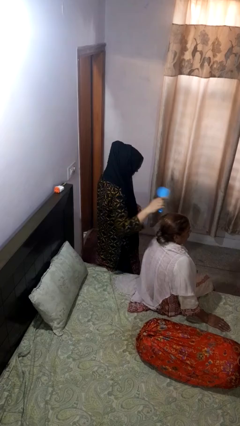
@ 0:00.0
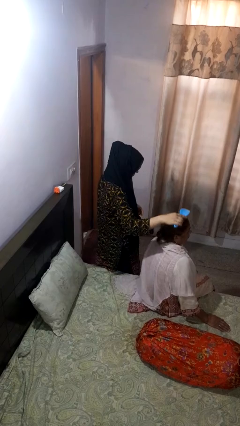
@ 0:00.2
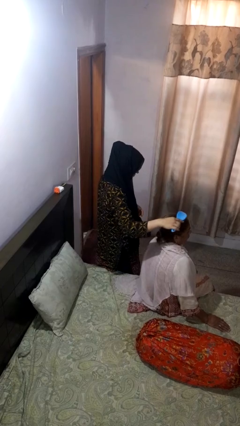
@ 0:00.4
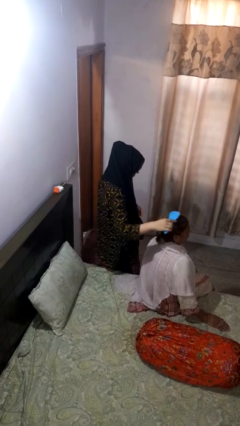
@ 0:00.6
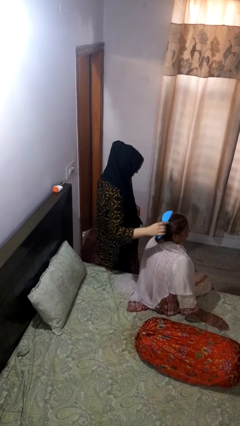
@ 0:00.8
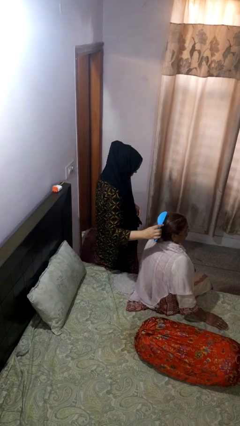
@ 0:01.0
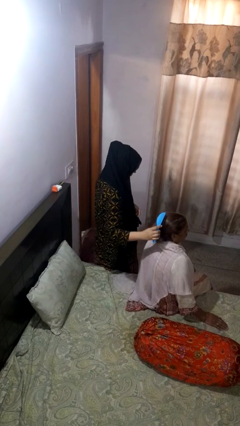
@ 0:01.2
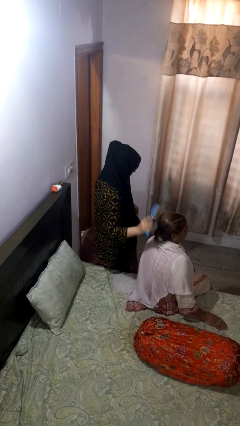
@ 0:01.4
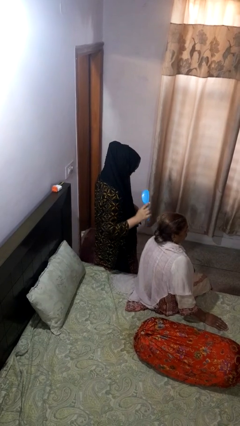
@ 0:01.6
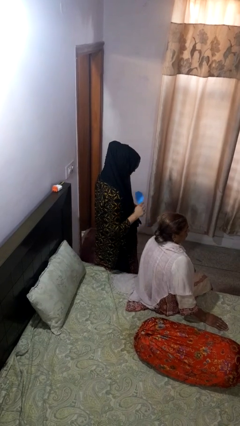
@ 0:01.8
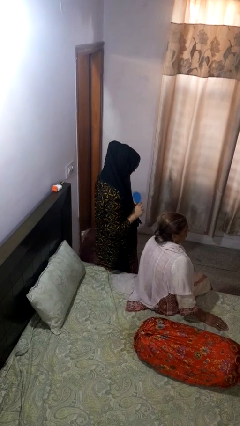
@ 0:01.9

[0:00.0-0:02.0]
person brushes hair of person

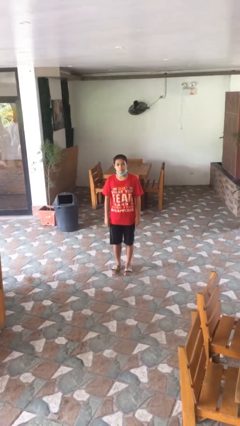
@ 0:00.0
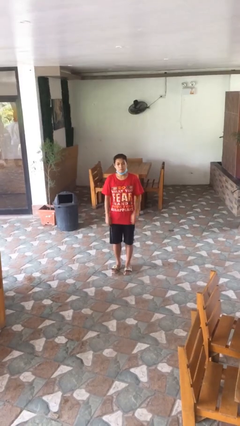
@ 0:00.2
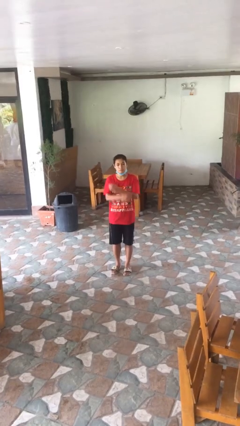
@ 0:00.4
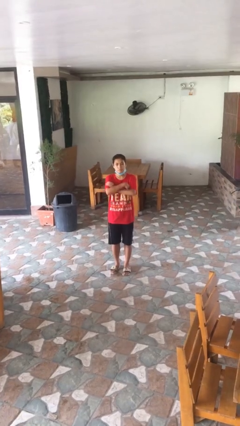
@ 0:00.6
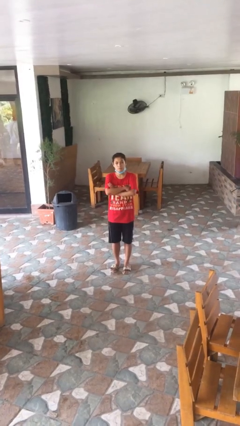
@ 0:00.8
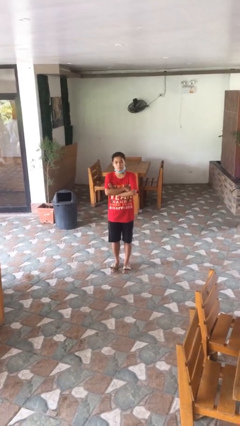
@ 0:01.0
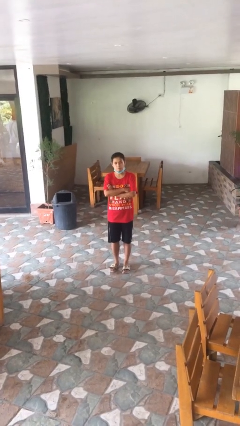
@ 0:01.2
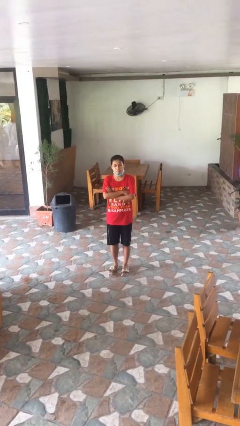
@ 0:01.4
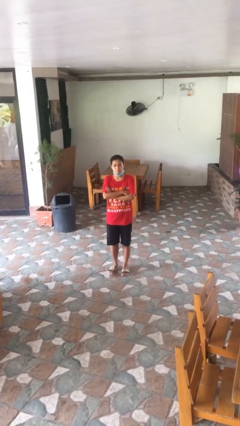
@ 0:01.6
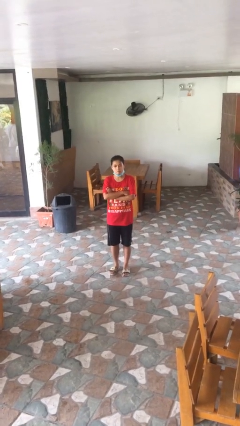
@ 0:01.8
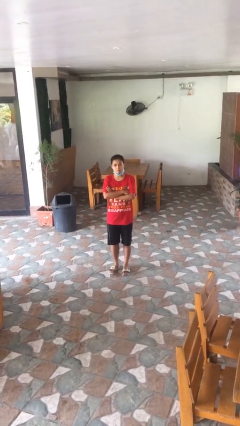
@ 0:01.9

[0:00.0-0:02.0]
person crosses arms

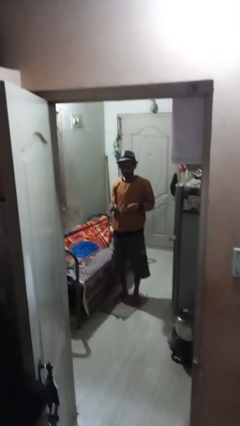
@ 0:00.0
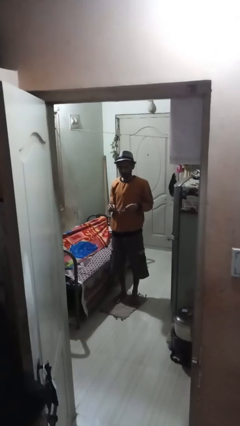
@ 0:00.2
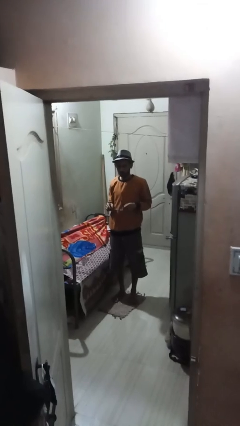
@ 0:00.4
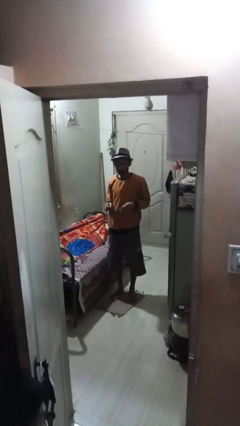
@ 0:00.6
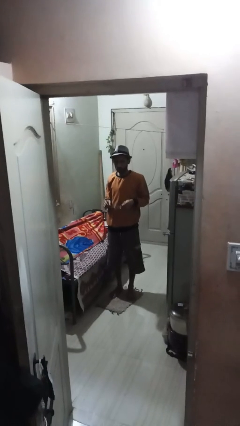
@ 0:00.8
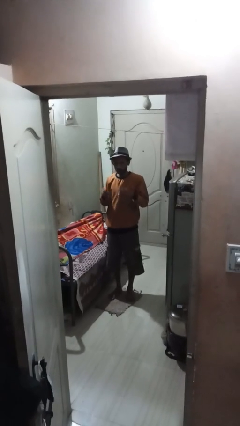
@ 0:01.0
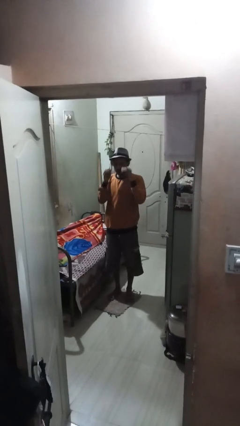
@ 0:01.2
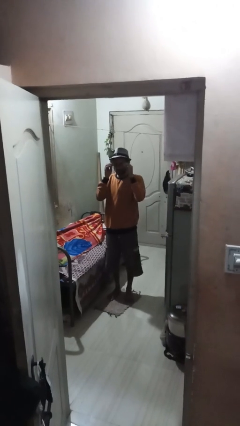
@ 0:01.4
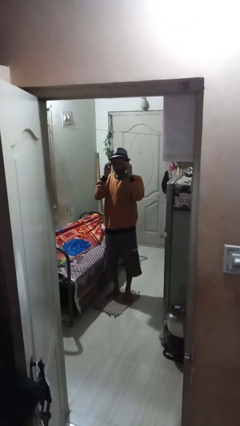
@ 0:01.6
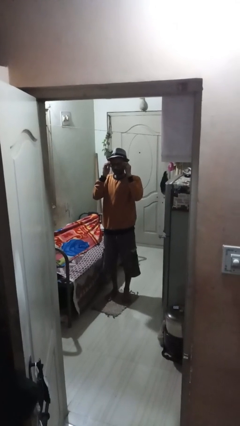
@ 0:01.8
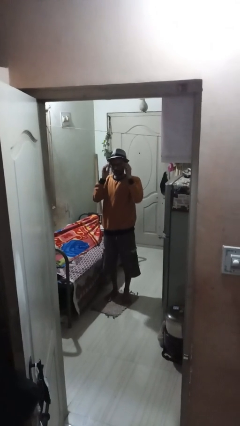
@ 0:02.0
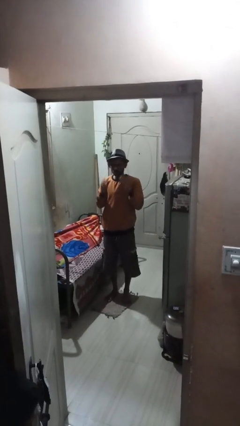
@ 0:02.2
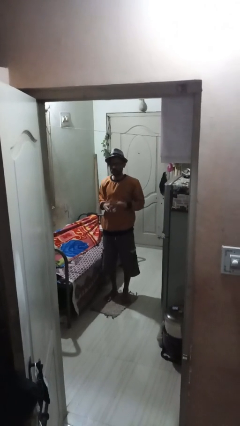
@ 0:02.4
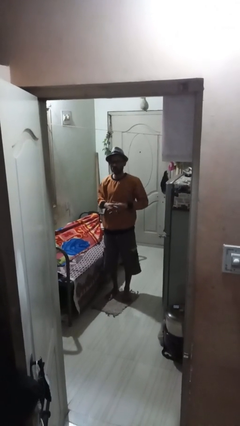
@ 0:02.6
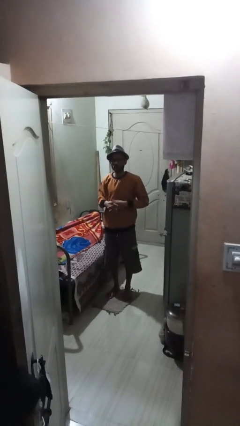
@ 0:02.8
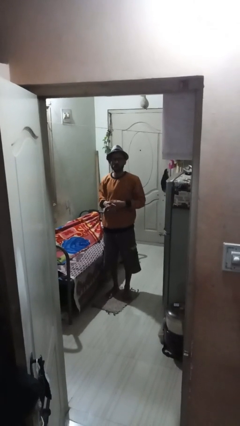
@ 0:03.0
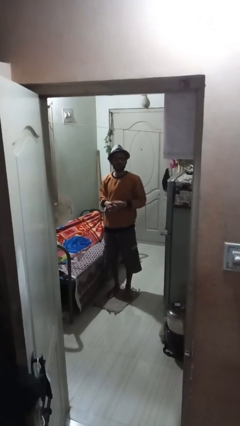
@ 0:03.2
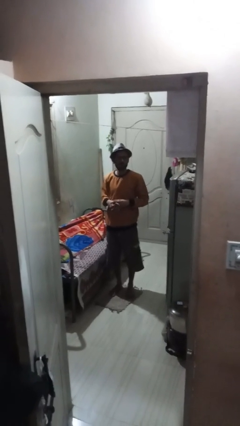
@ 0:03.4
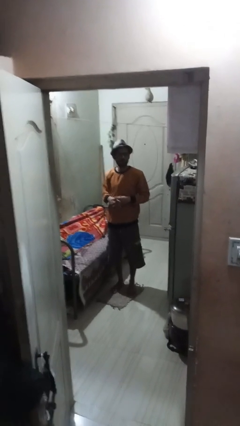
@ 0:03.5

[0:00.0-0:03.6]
person puts on glasses

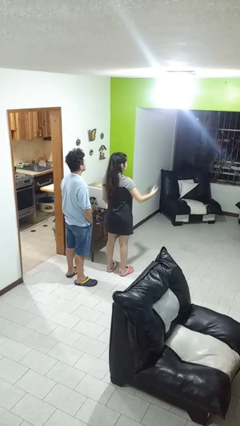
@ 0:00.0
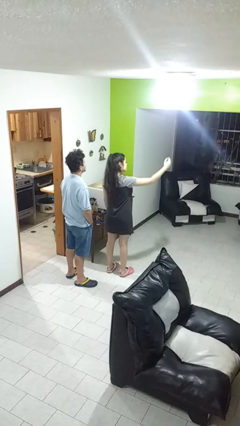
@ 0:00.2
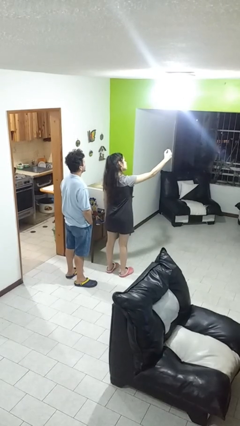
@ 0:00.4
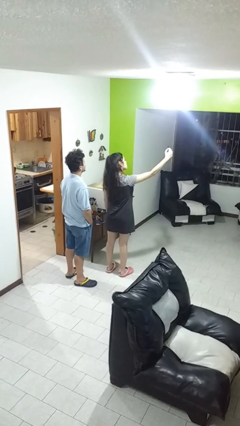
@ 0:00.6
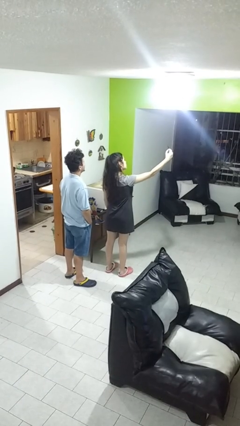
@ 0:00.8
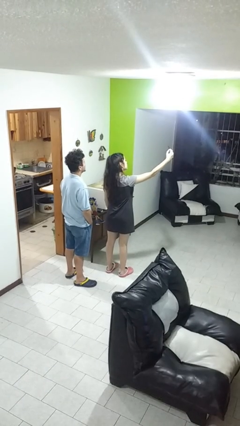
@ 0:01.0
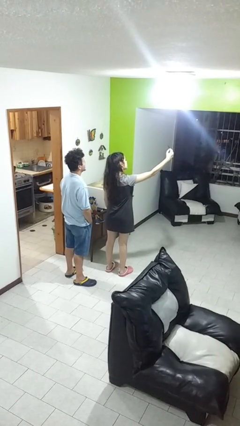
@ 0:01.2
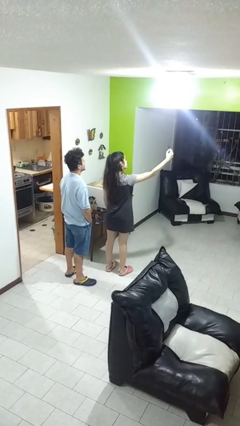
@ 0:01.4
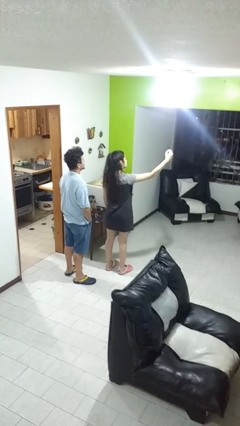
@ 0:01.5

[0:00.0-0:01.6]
person takes selfie with person

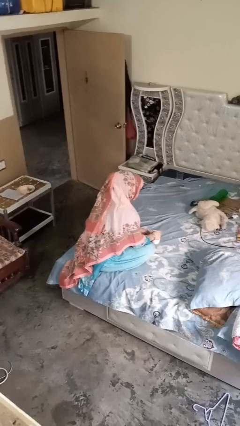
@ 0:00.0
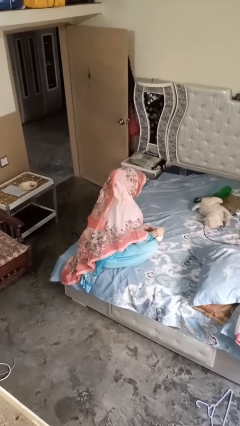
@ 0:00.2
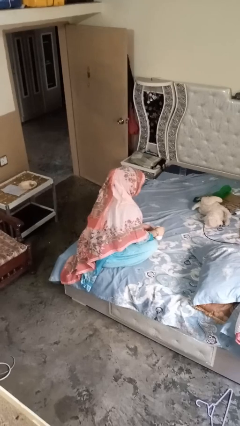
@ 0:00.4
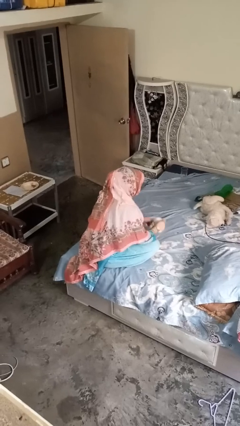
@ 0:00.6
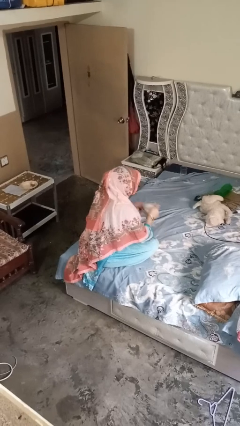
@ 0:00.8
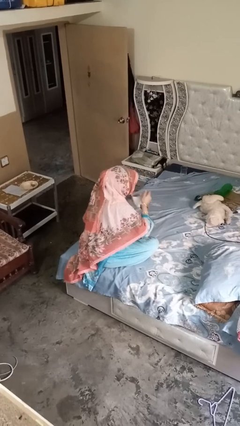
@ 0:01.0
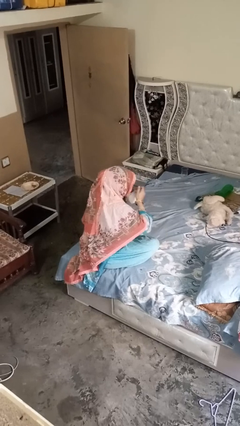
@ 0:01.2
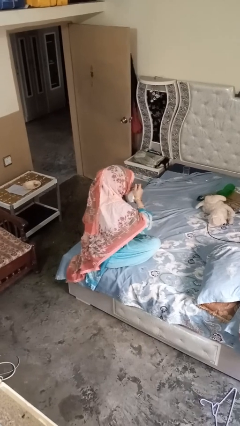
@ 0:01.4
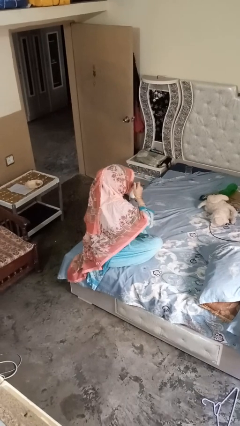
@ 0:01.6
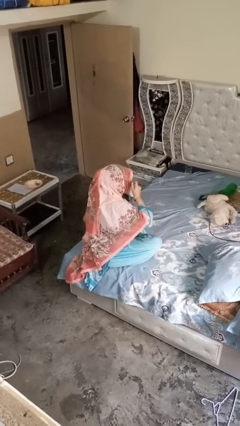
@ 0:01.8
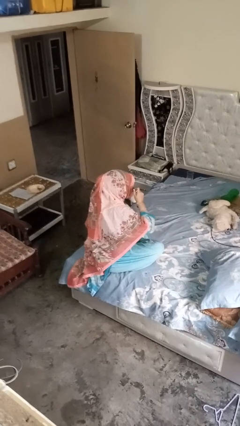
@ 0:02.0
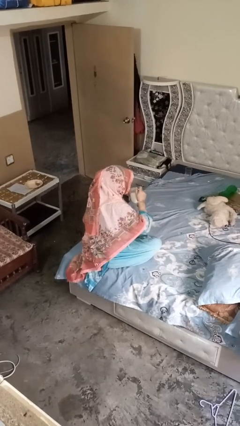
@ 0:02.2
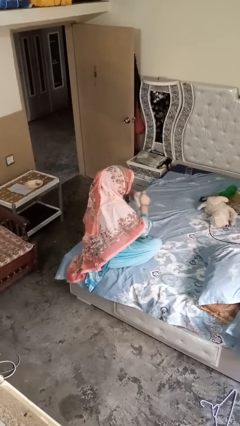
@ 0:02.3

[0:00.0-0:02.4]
person drinks from mug

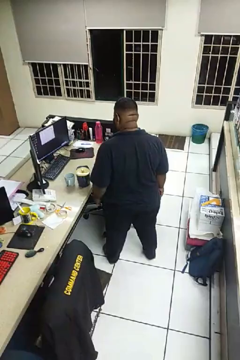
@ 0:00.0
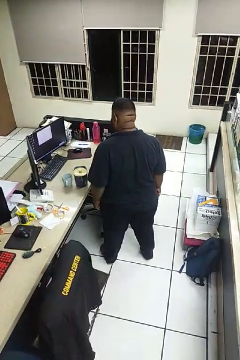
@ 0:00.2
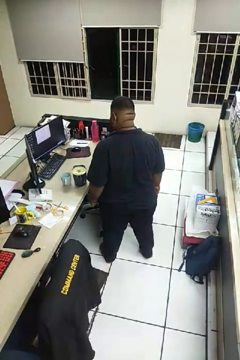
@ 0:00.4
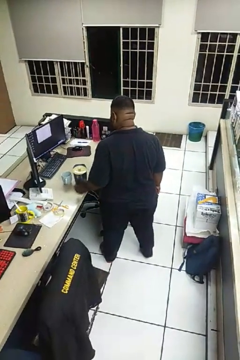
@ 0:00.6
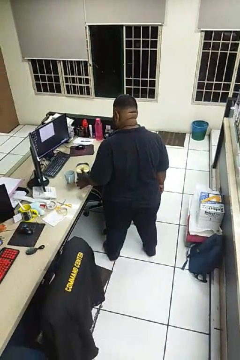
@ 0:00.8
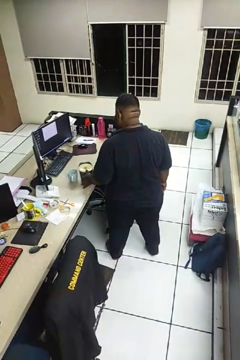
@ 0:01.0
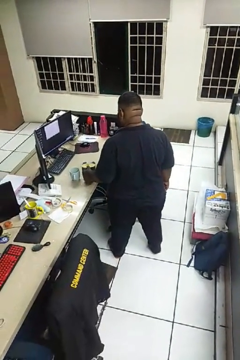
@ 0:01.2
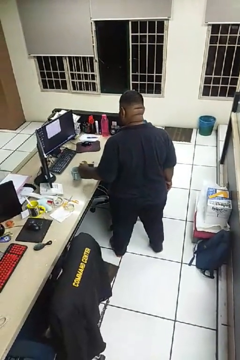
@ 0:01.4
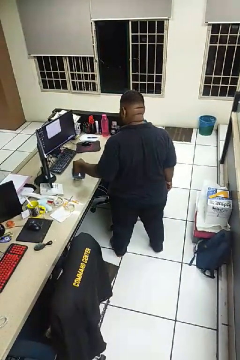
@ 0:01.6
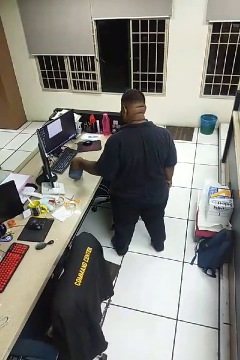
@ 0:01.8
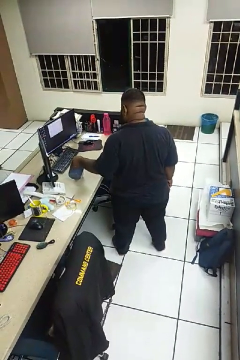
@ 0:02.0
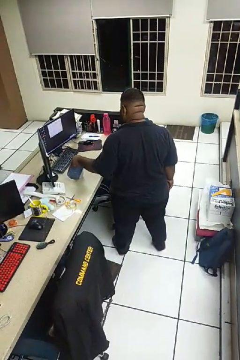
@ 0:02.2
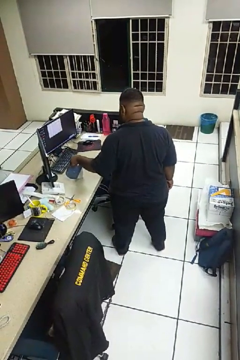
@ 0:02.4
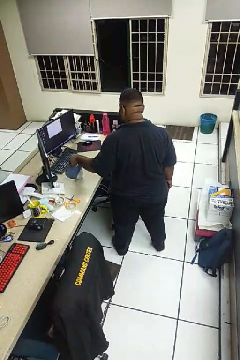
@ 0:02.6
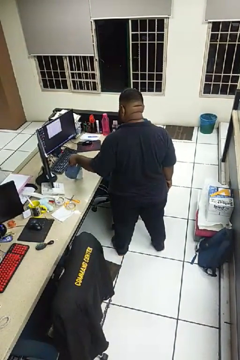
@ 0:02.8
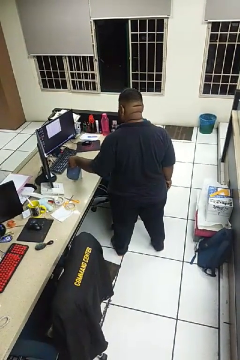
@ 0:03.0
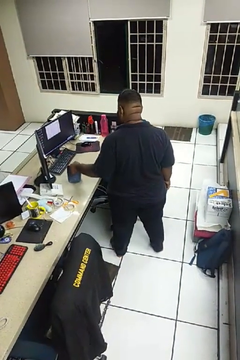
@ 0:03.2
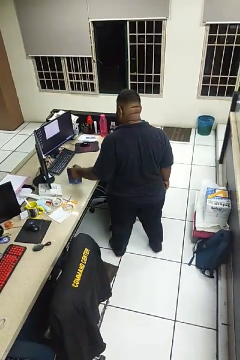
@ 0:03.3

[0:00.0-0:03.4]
person pours coffee into mug

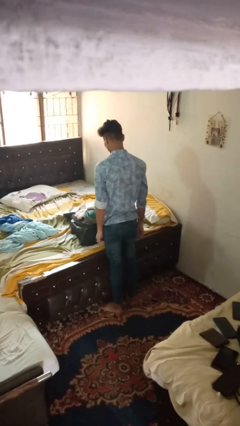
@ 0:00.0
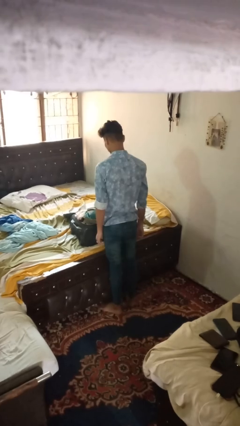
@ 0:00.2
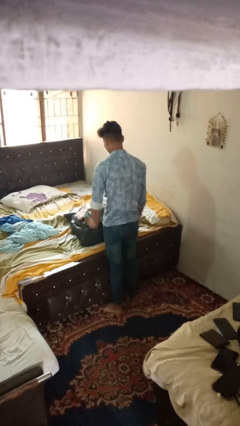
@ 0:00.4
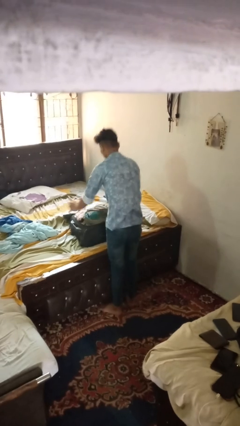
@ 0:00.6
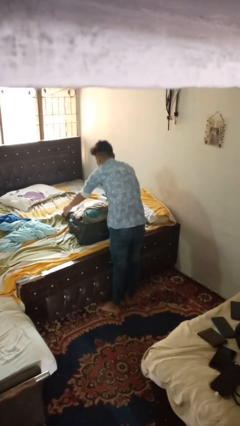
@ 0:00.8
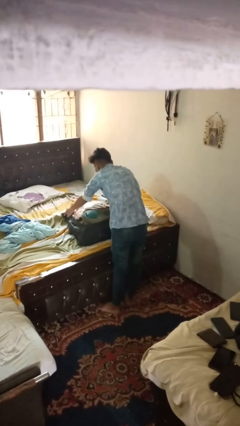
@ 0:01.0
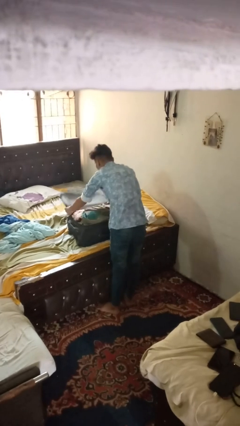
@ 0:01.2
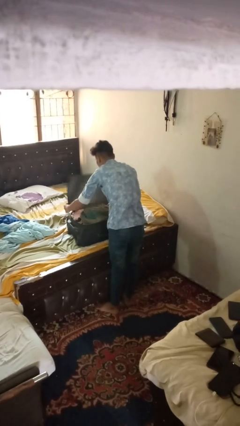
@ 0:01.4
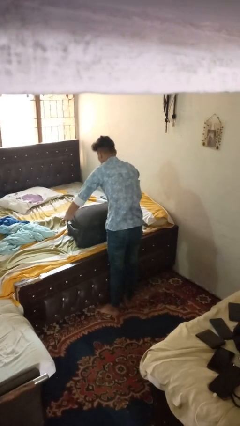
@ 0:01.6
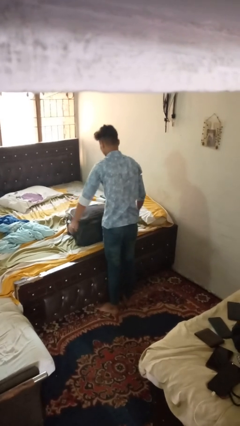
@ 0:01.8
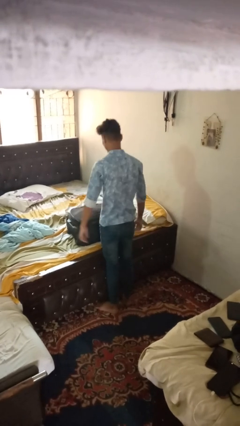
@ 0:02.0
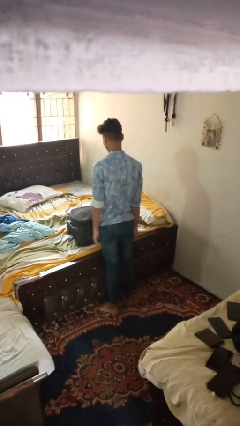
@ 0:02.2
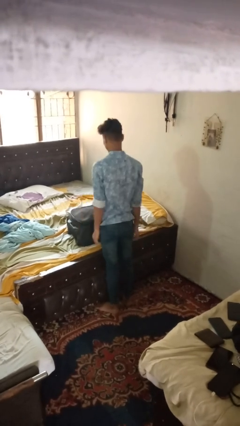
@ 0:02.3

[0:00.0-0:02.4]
person closes suitcase

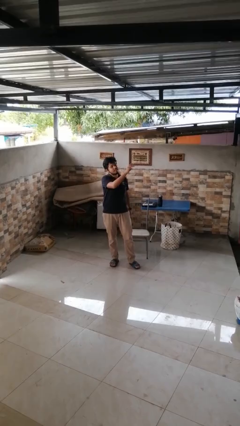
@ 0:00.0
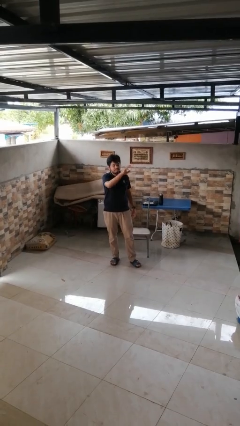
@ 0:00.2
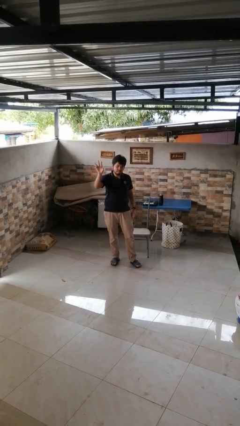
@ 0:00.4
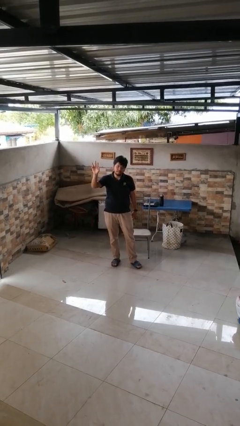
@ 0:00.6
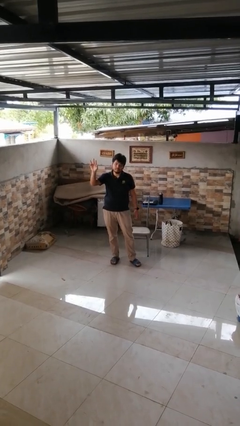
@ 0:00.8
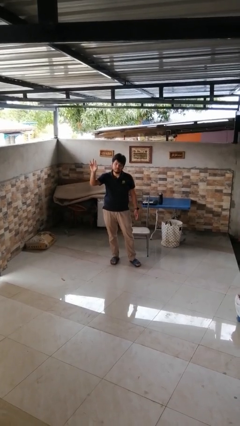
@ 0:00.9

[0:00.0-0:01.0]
person gestures swipe right
